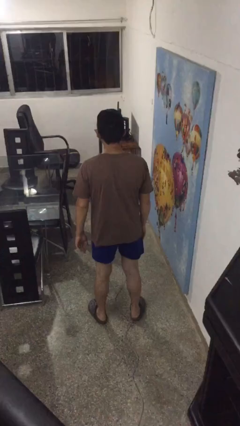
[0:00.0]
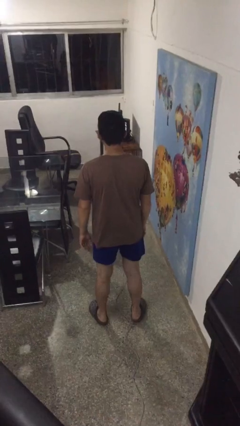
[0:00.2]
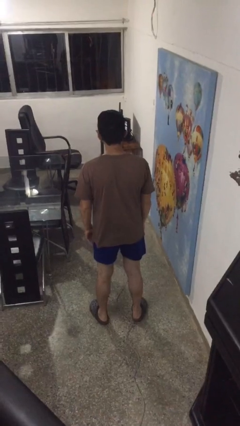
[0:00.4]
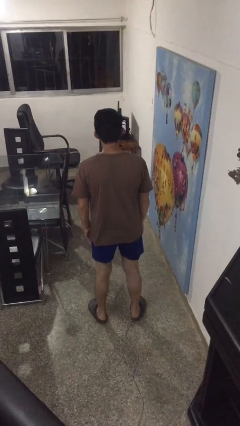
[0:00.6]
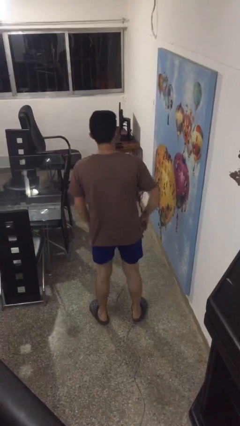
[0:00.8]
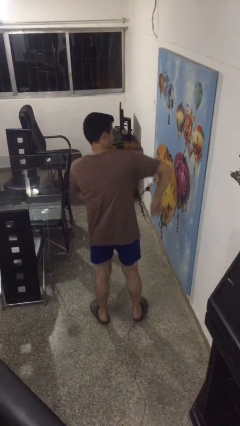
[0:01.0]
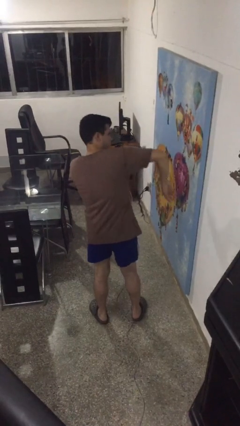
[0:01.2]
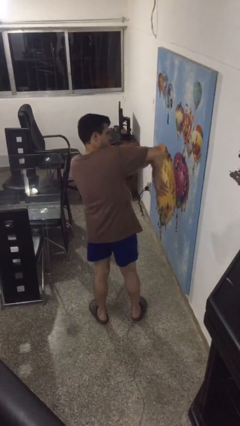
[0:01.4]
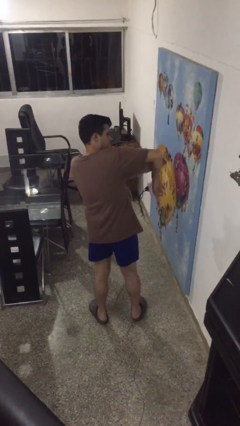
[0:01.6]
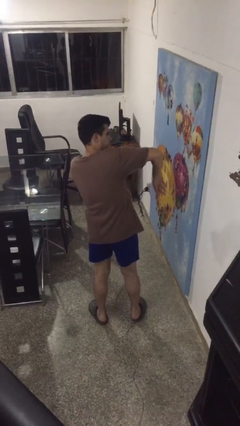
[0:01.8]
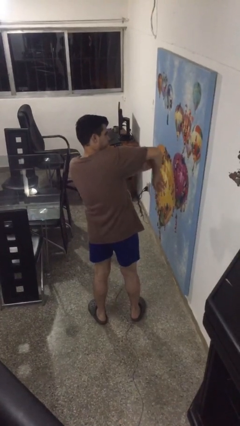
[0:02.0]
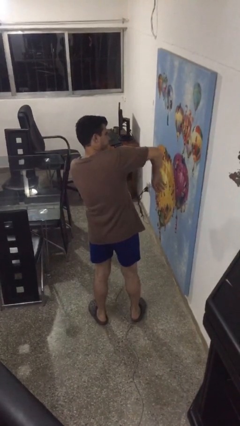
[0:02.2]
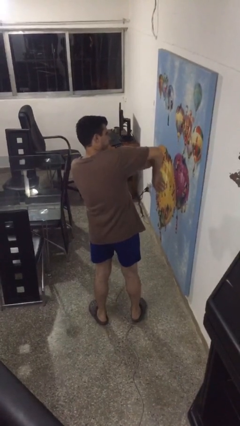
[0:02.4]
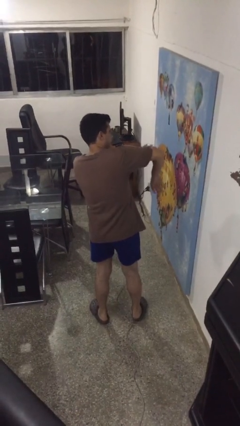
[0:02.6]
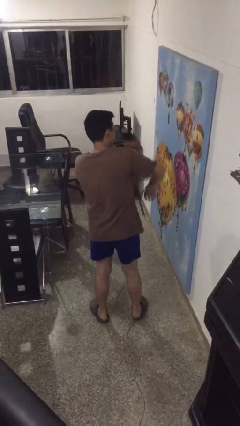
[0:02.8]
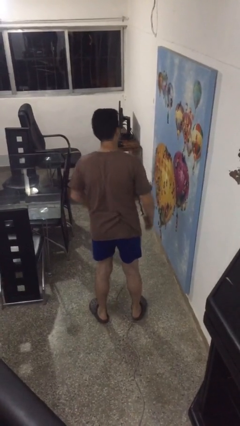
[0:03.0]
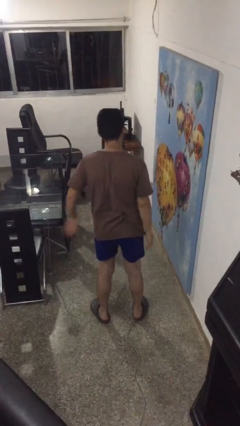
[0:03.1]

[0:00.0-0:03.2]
person swats bug

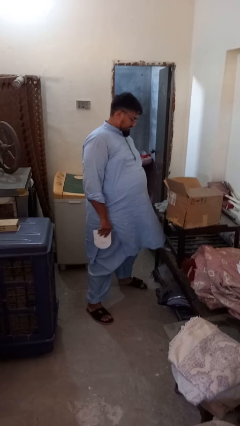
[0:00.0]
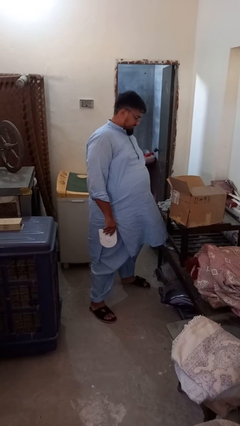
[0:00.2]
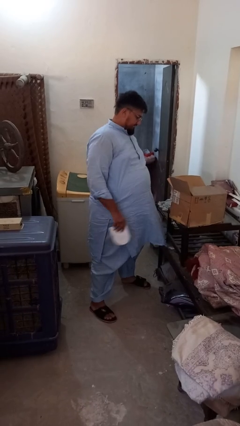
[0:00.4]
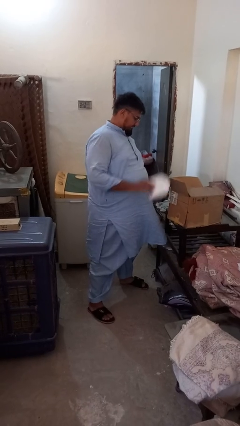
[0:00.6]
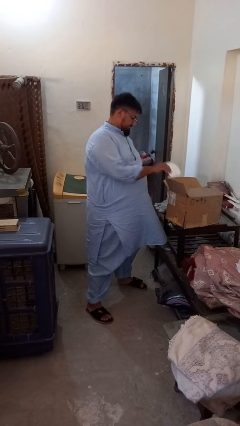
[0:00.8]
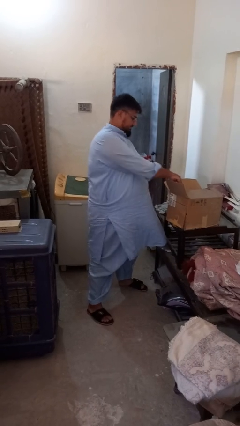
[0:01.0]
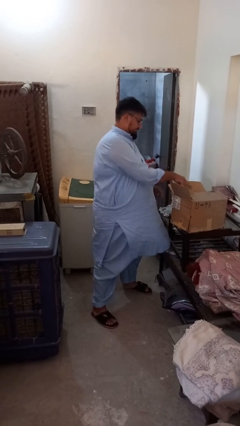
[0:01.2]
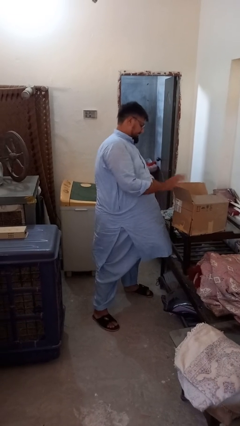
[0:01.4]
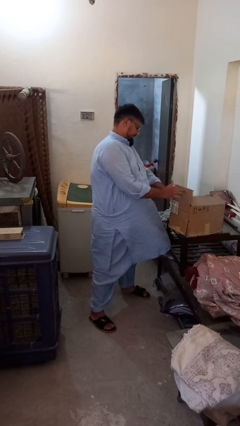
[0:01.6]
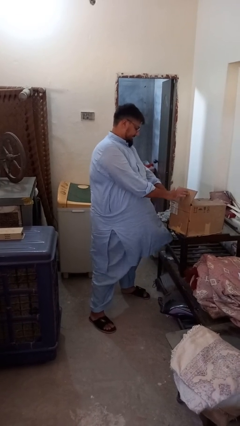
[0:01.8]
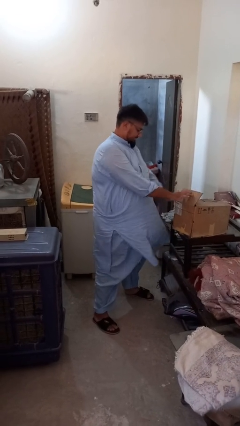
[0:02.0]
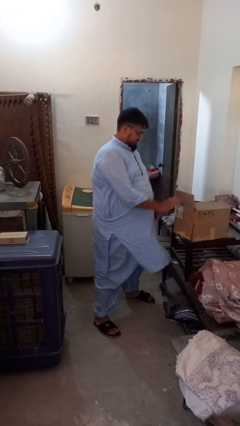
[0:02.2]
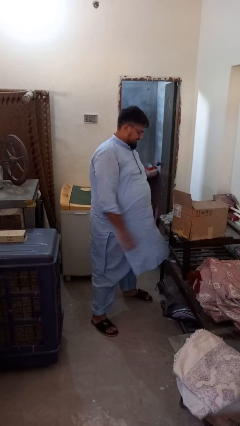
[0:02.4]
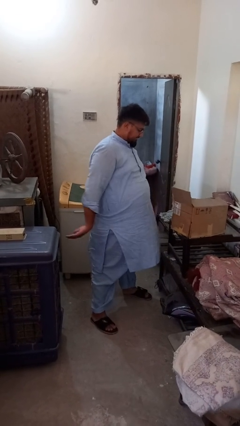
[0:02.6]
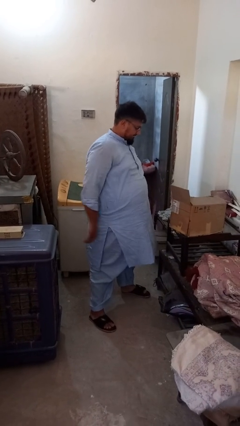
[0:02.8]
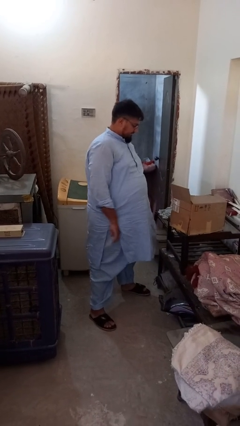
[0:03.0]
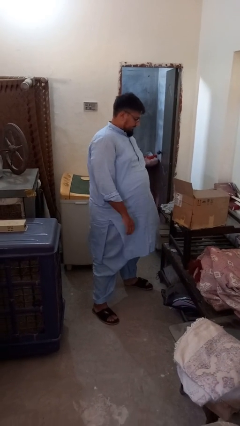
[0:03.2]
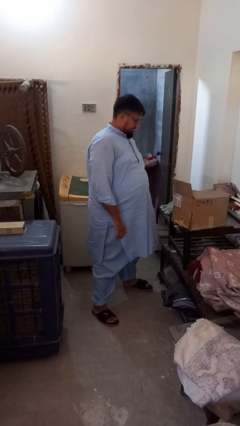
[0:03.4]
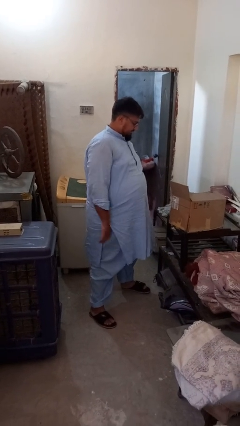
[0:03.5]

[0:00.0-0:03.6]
person puts object into box

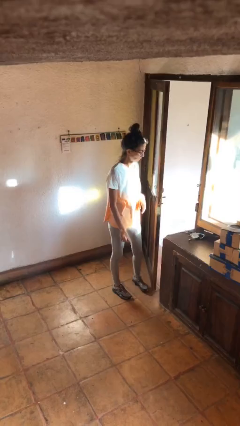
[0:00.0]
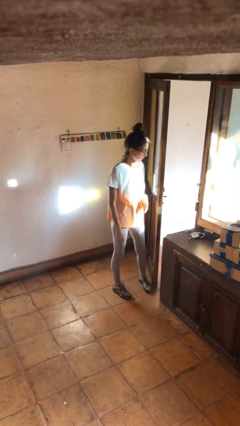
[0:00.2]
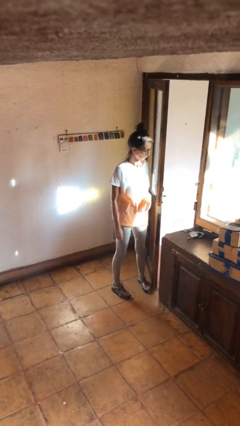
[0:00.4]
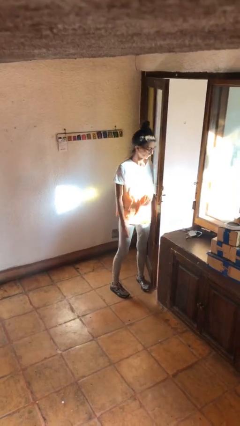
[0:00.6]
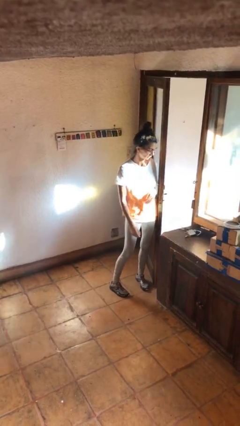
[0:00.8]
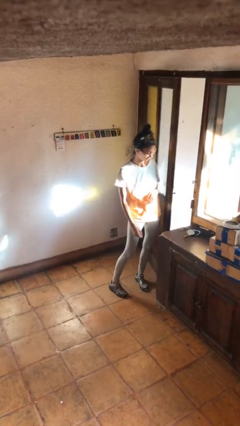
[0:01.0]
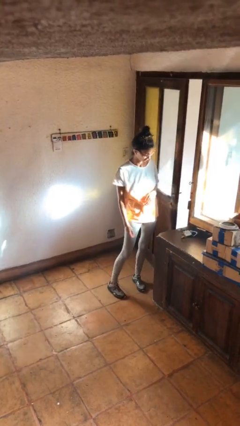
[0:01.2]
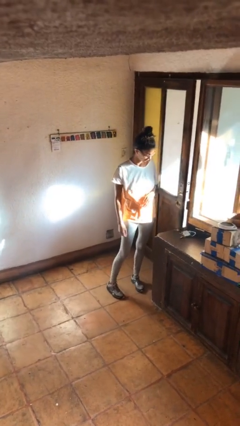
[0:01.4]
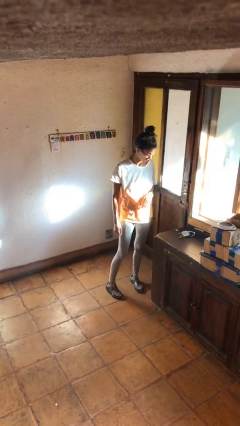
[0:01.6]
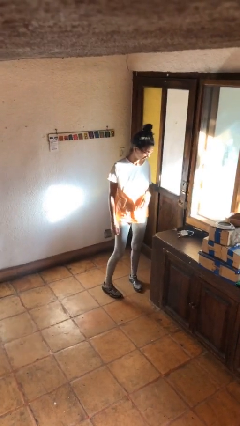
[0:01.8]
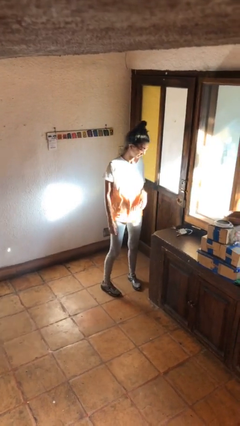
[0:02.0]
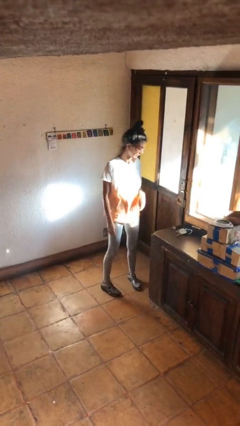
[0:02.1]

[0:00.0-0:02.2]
person closes door with hip

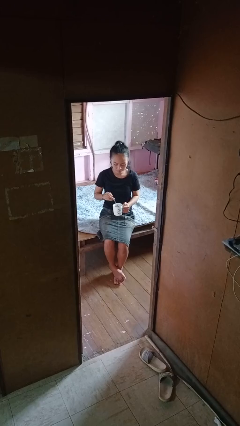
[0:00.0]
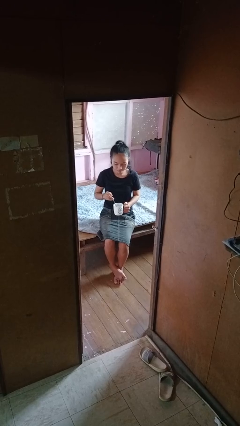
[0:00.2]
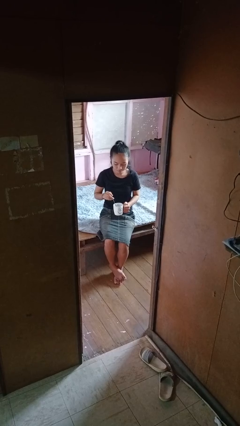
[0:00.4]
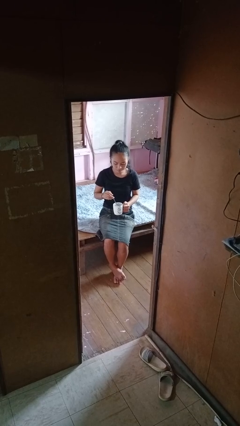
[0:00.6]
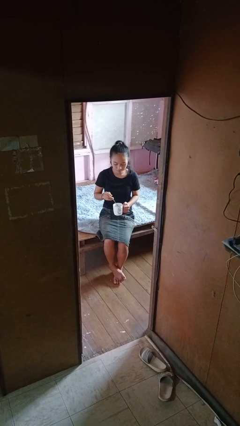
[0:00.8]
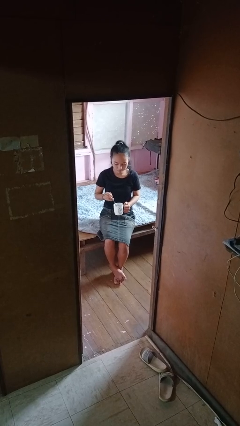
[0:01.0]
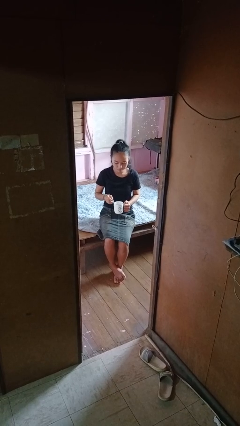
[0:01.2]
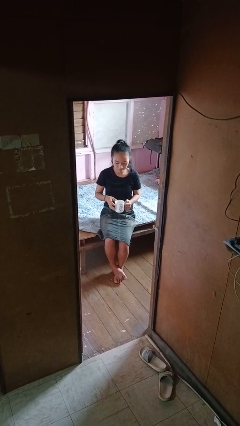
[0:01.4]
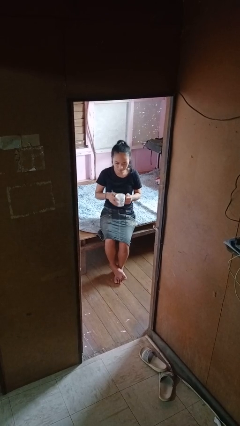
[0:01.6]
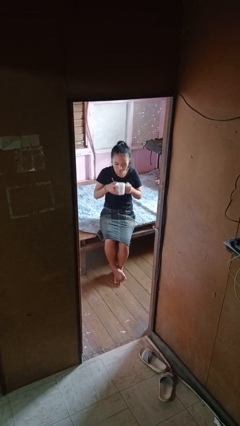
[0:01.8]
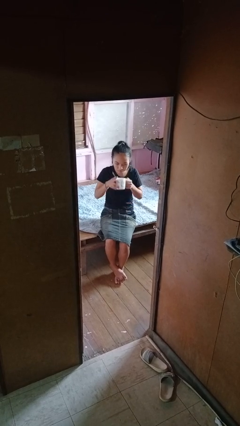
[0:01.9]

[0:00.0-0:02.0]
person stirs mug

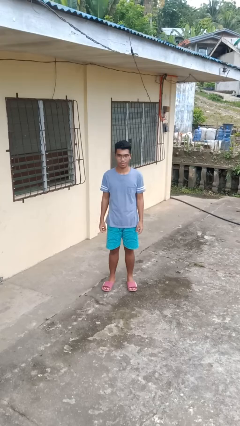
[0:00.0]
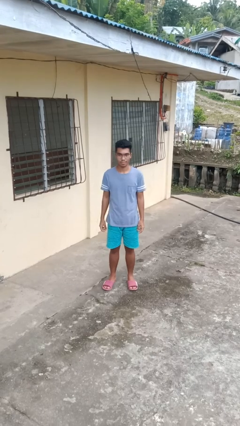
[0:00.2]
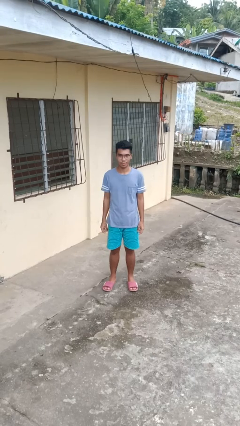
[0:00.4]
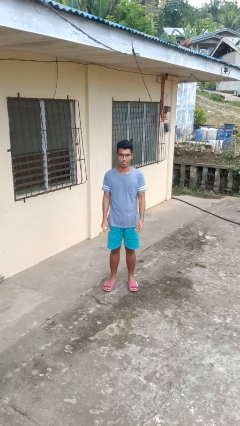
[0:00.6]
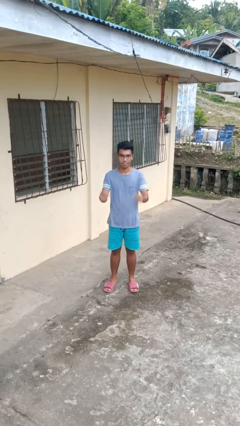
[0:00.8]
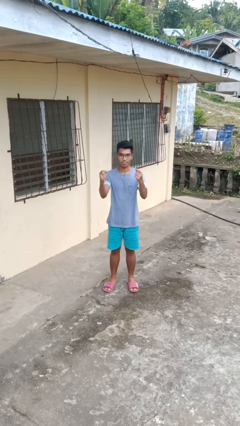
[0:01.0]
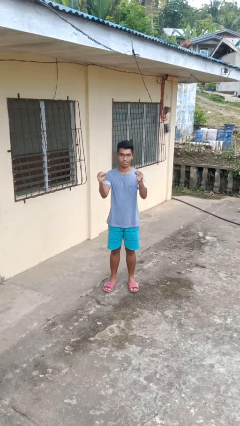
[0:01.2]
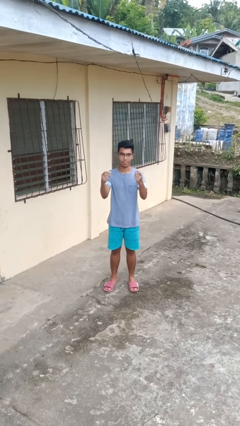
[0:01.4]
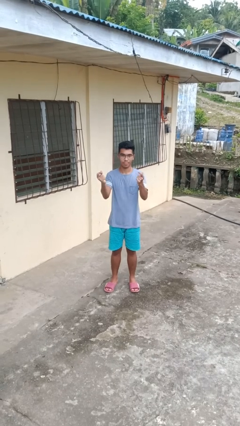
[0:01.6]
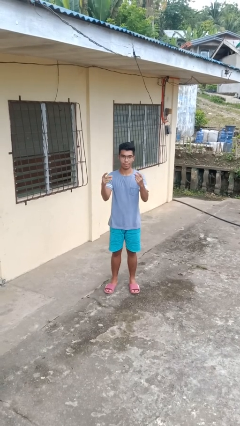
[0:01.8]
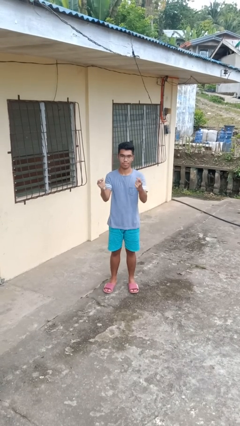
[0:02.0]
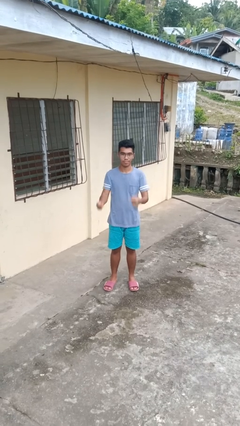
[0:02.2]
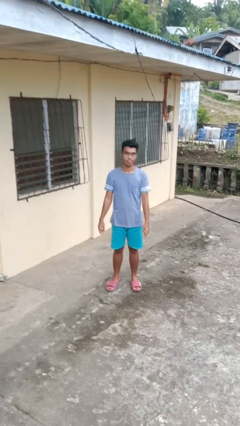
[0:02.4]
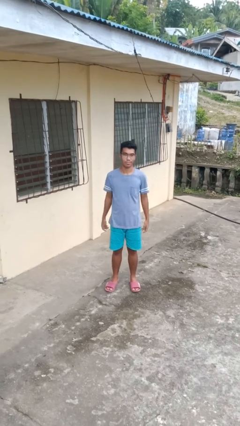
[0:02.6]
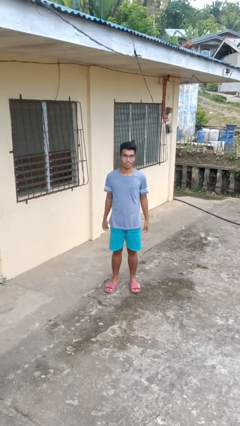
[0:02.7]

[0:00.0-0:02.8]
person snaps fingers

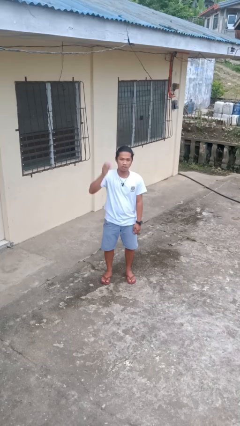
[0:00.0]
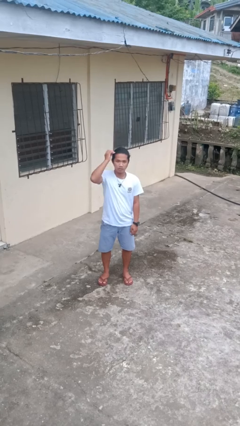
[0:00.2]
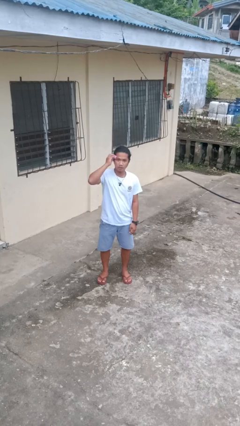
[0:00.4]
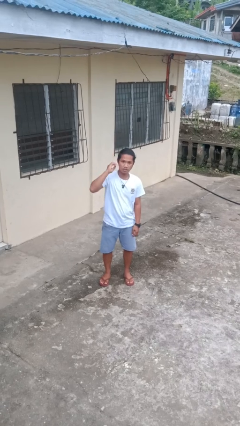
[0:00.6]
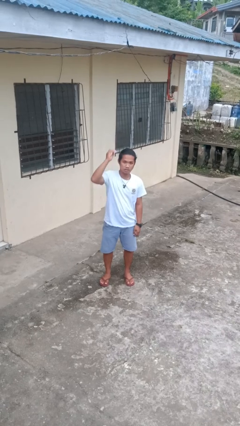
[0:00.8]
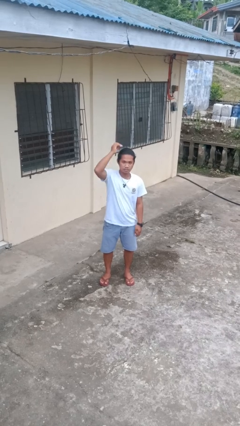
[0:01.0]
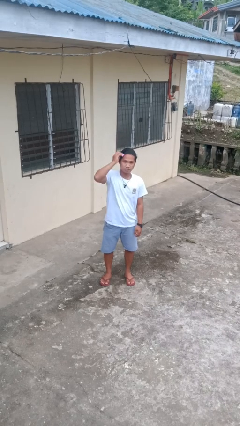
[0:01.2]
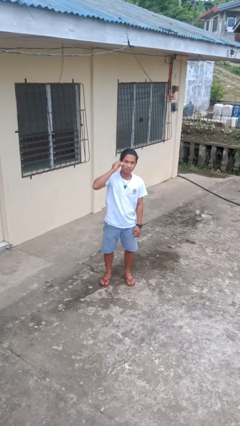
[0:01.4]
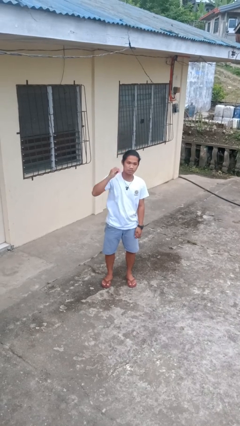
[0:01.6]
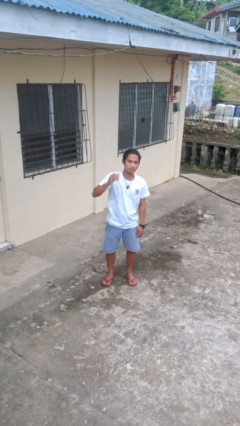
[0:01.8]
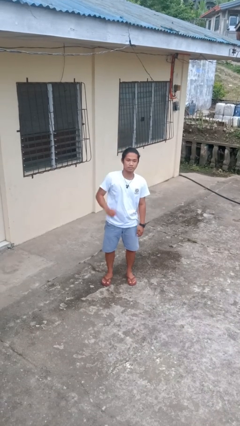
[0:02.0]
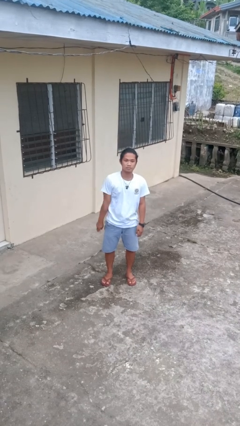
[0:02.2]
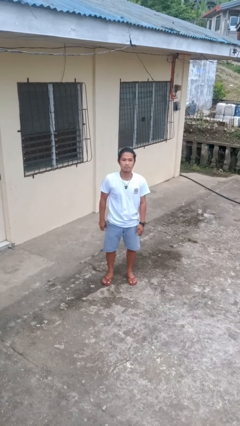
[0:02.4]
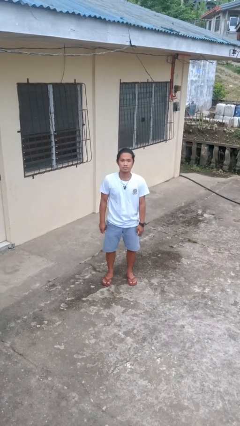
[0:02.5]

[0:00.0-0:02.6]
person brushes hair

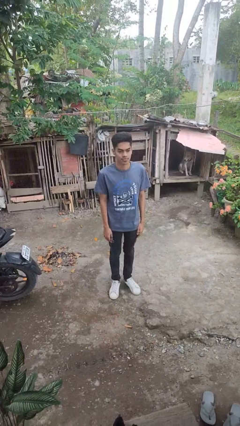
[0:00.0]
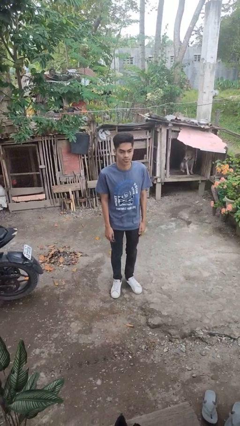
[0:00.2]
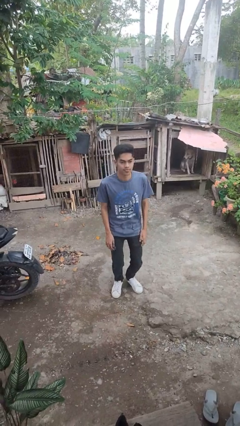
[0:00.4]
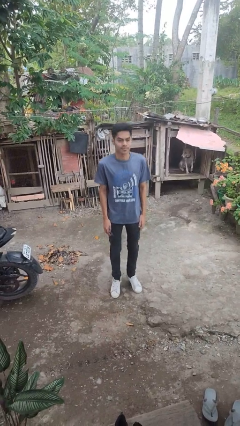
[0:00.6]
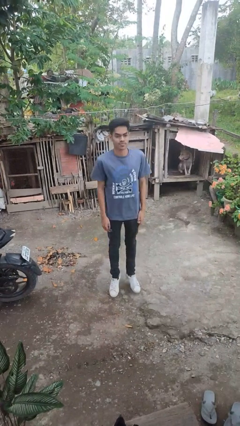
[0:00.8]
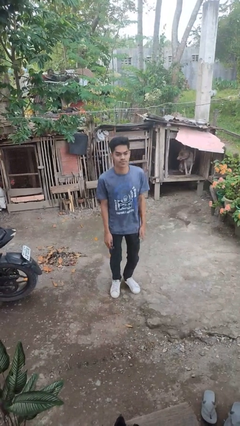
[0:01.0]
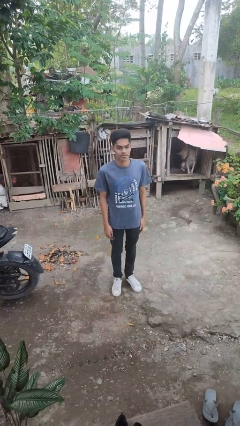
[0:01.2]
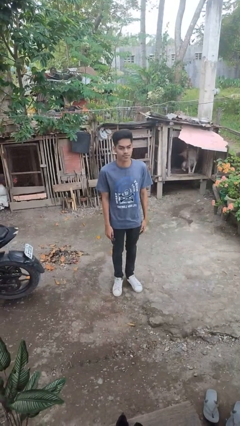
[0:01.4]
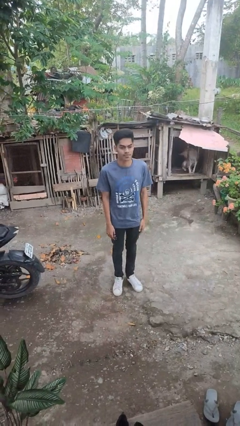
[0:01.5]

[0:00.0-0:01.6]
person jumps
